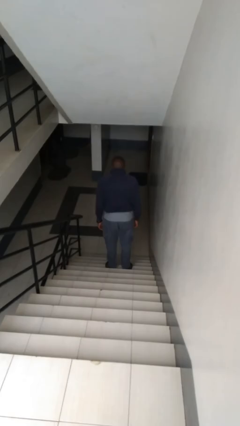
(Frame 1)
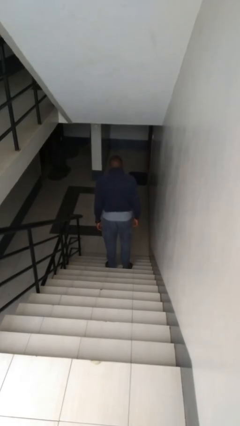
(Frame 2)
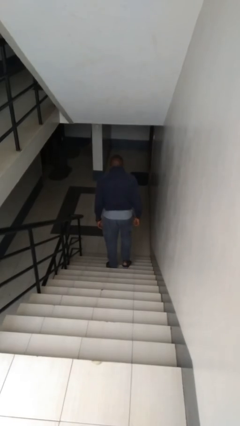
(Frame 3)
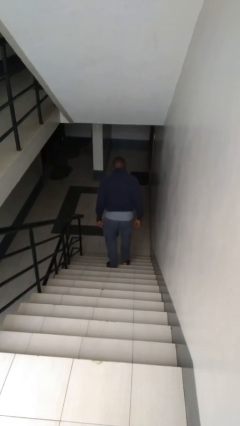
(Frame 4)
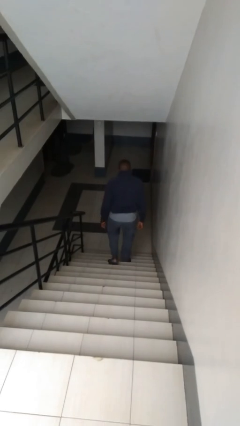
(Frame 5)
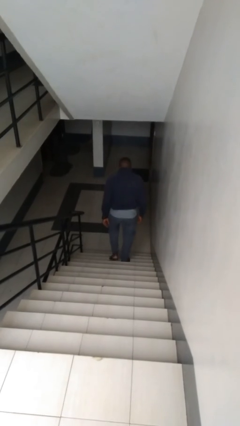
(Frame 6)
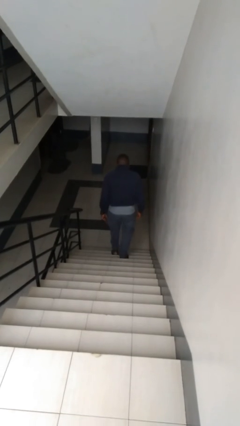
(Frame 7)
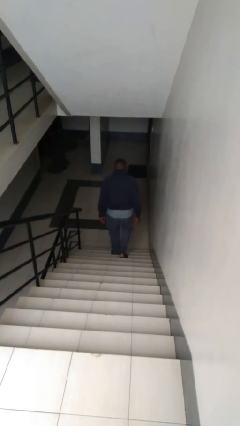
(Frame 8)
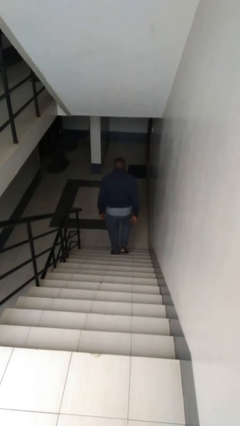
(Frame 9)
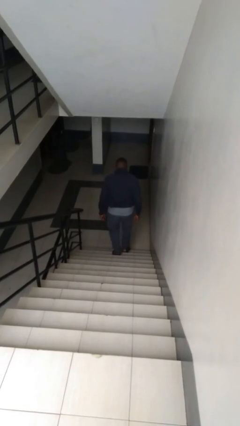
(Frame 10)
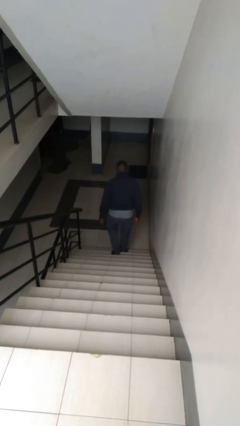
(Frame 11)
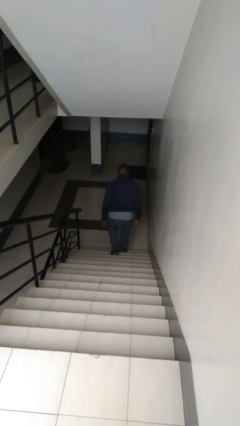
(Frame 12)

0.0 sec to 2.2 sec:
person climbs down stairs

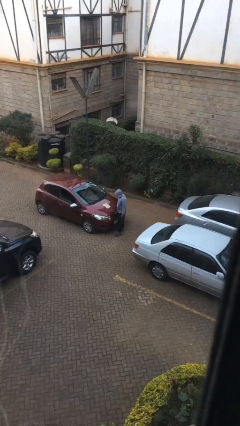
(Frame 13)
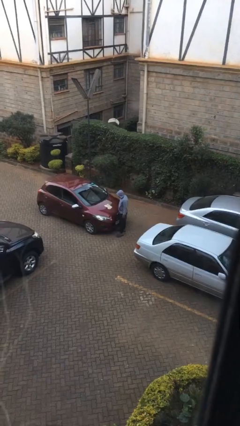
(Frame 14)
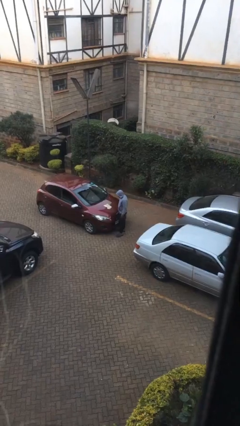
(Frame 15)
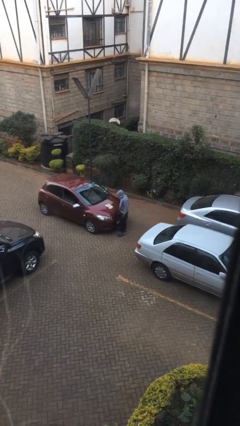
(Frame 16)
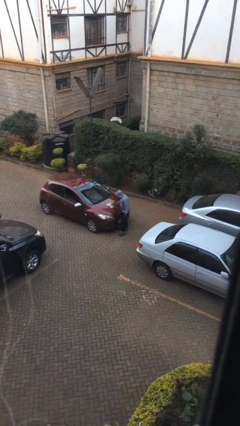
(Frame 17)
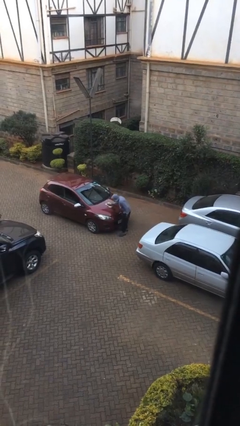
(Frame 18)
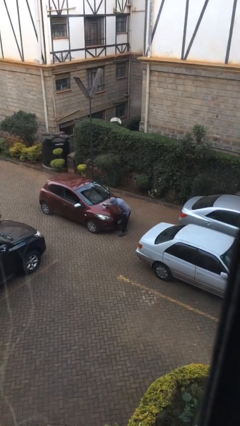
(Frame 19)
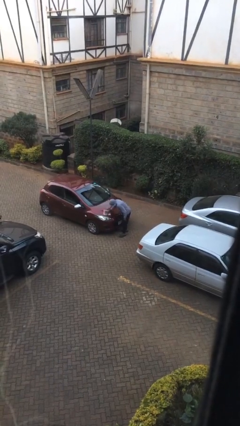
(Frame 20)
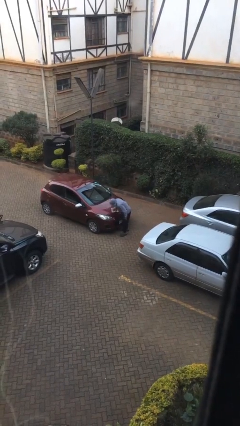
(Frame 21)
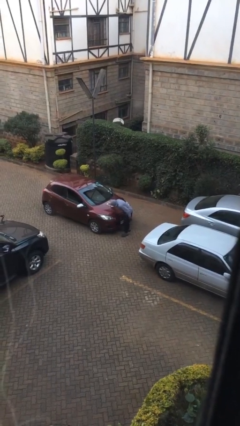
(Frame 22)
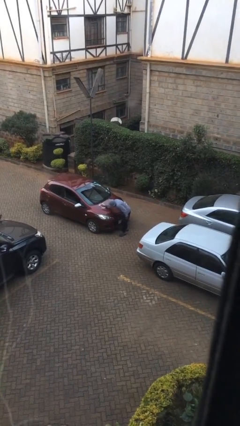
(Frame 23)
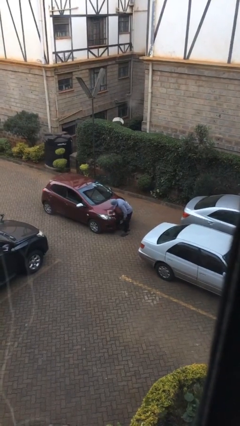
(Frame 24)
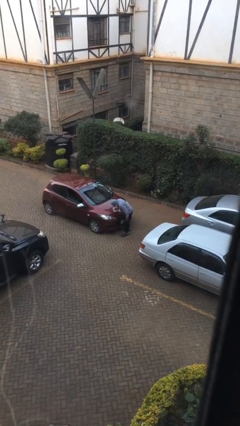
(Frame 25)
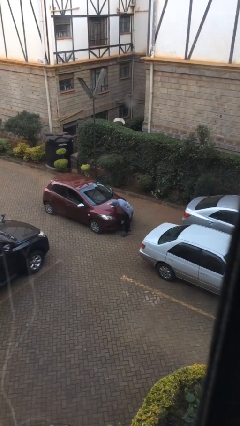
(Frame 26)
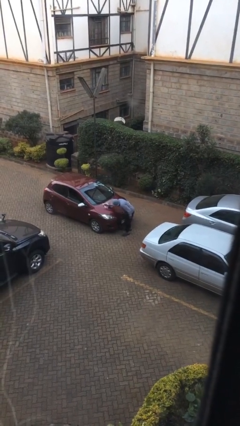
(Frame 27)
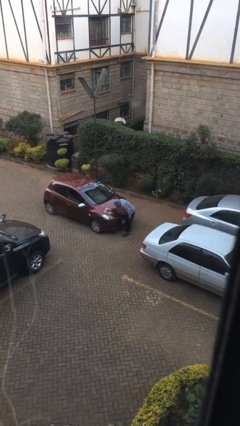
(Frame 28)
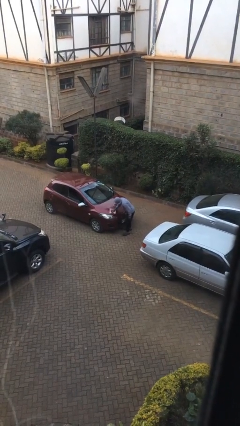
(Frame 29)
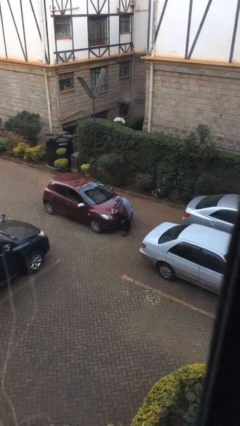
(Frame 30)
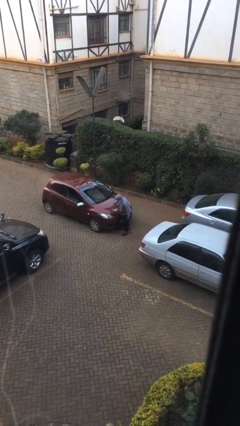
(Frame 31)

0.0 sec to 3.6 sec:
person polishes car with rag

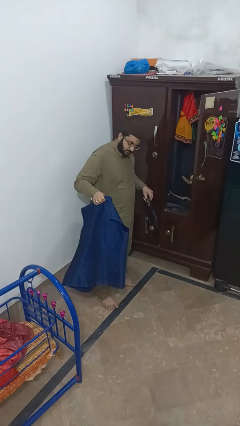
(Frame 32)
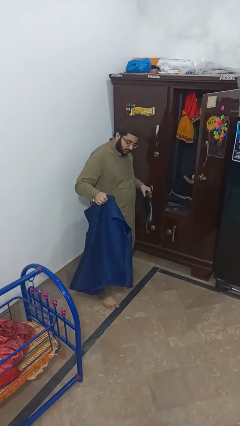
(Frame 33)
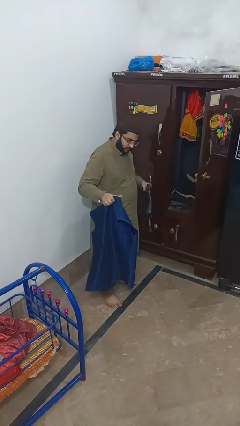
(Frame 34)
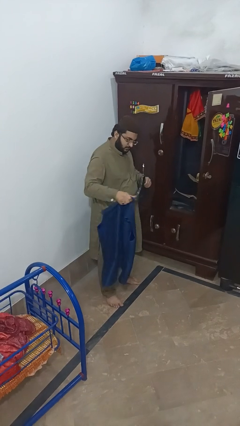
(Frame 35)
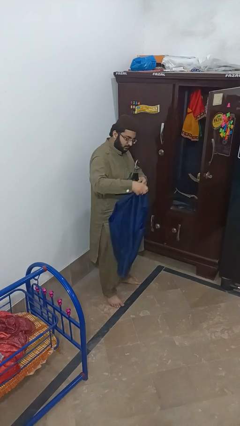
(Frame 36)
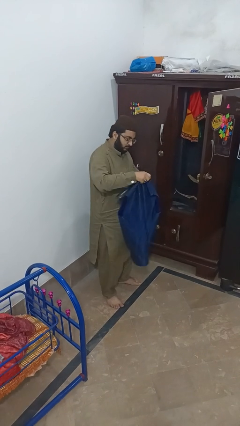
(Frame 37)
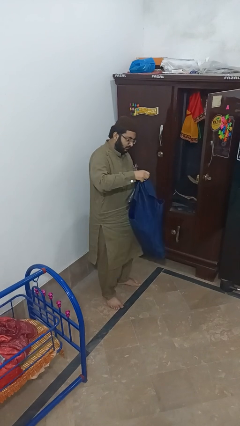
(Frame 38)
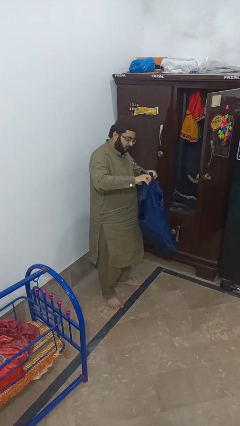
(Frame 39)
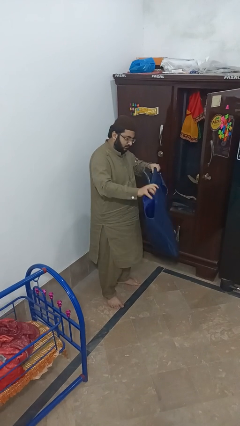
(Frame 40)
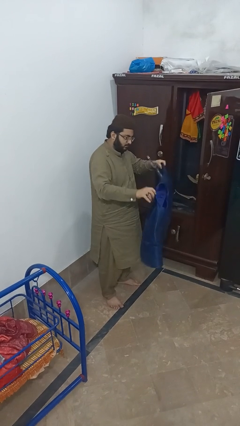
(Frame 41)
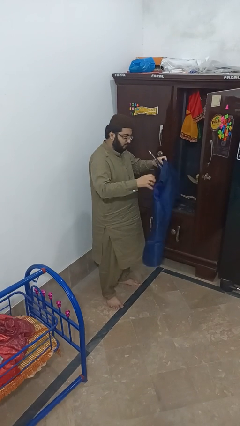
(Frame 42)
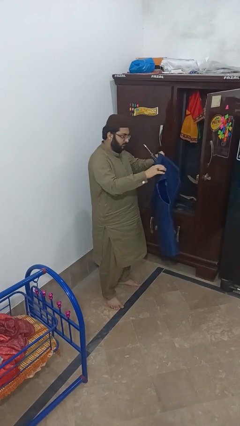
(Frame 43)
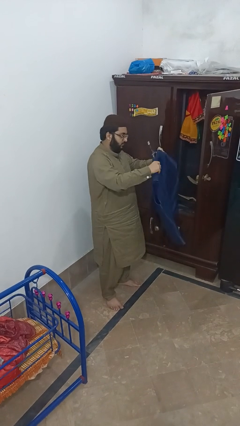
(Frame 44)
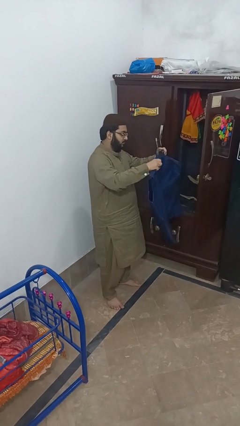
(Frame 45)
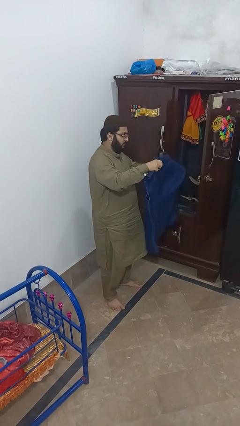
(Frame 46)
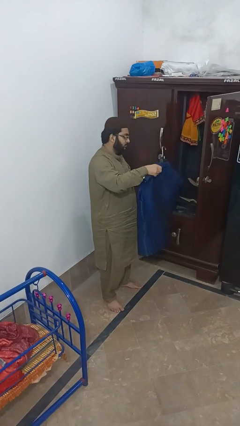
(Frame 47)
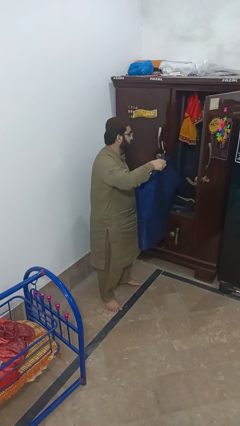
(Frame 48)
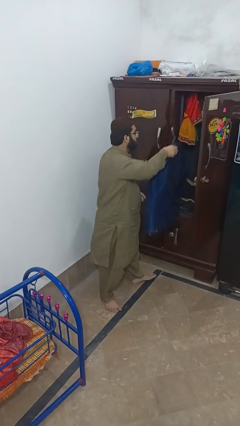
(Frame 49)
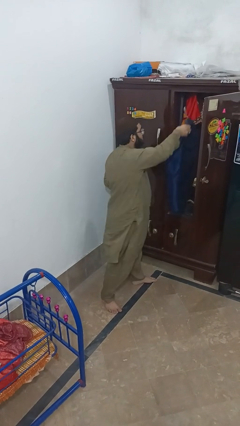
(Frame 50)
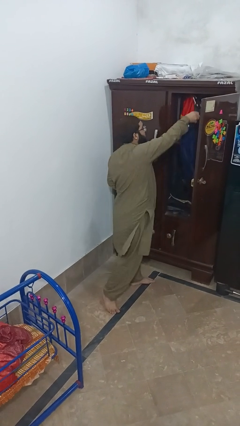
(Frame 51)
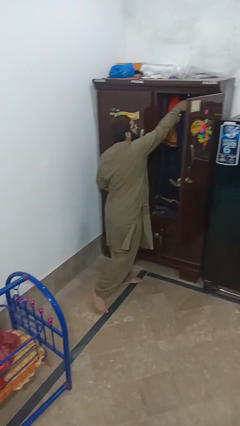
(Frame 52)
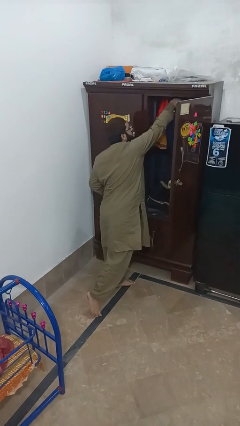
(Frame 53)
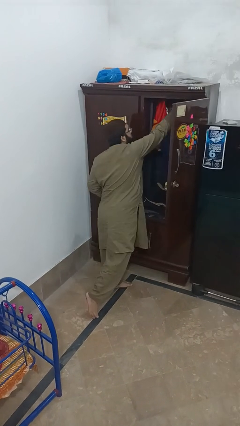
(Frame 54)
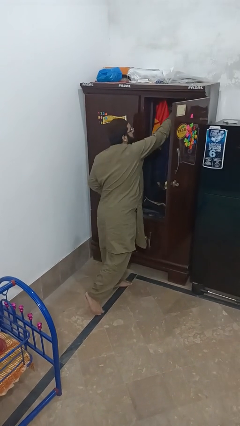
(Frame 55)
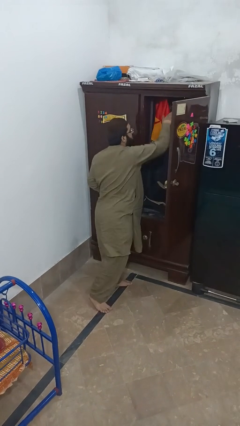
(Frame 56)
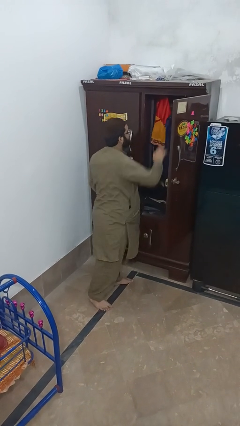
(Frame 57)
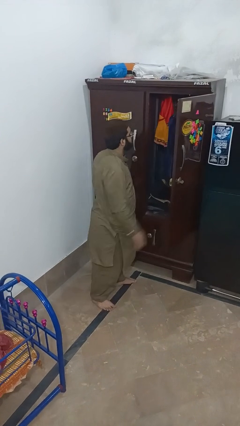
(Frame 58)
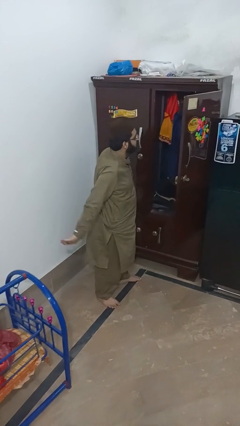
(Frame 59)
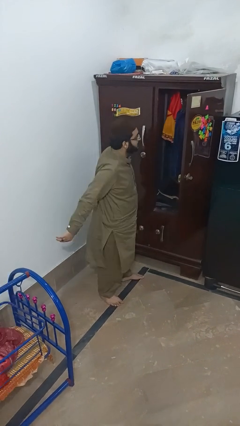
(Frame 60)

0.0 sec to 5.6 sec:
person puts clothes into closet

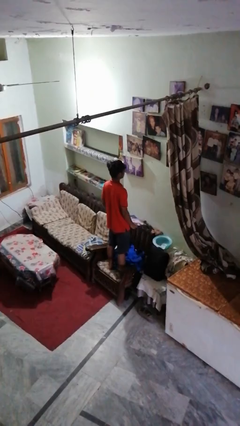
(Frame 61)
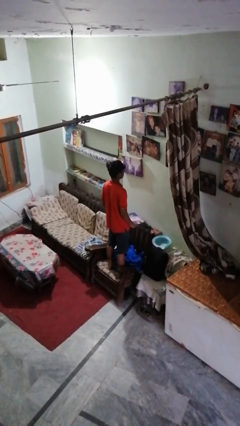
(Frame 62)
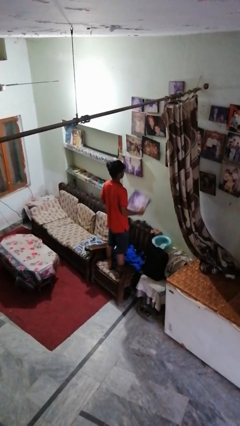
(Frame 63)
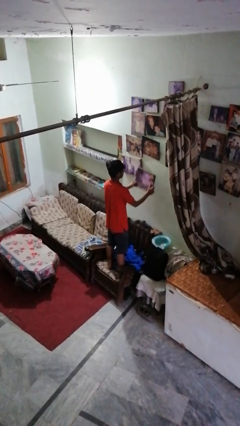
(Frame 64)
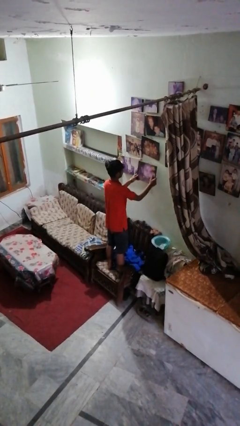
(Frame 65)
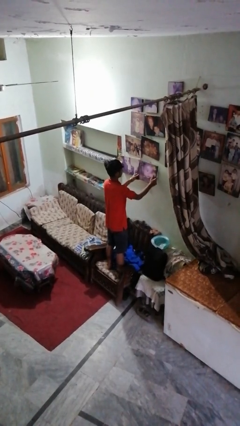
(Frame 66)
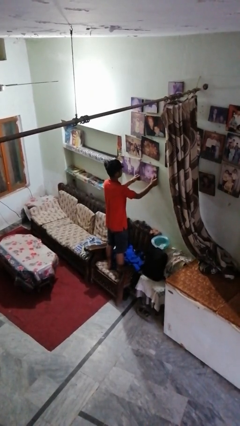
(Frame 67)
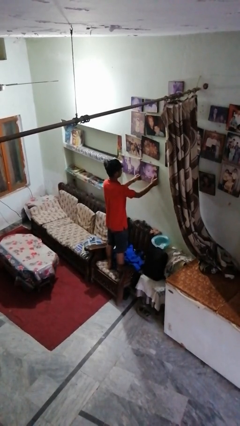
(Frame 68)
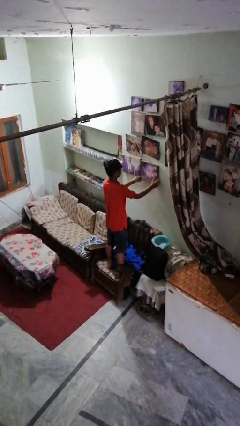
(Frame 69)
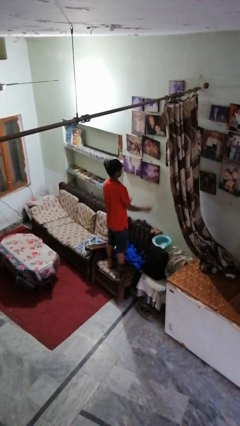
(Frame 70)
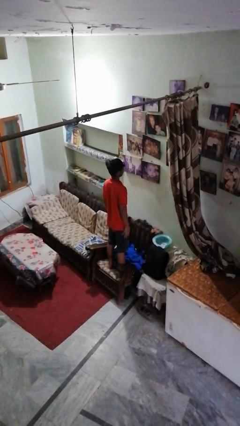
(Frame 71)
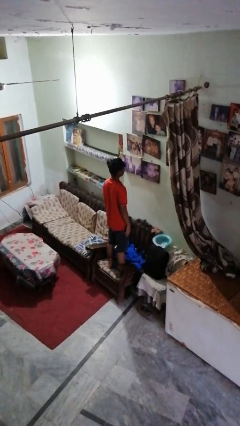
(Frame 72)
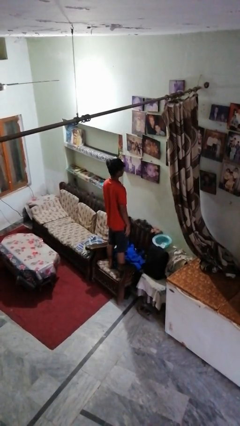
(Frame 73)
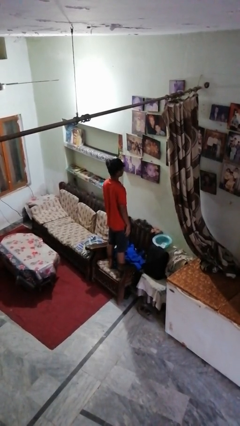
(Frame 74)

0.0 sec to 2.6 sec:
person puts up picture frame

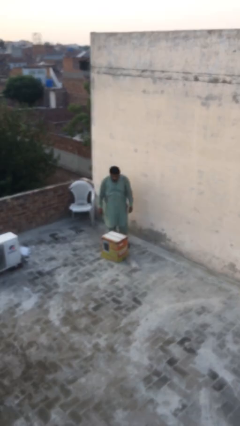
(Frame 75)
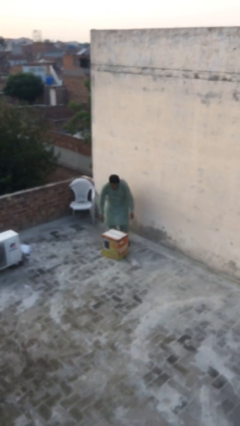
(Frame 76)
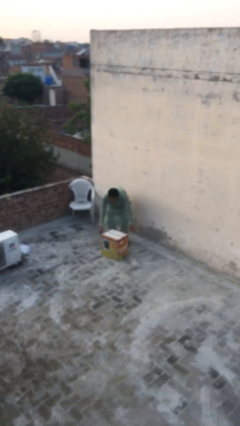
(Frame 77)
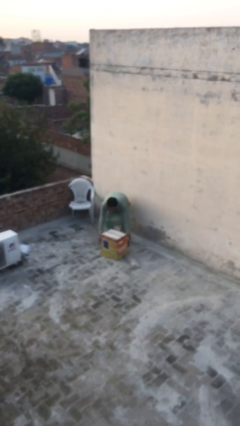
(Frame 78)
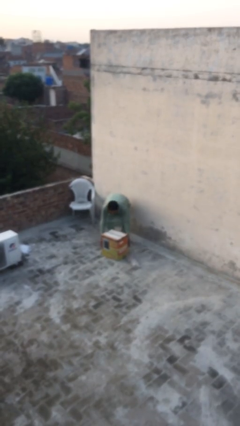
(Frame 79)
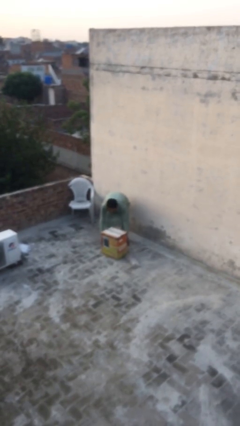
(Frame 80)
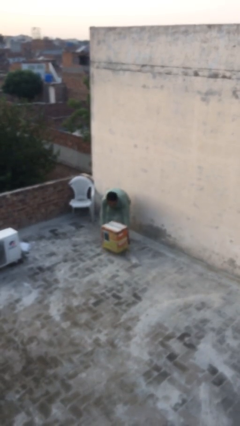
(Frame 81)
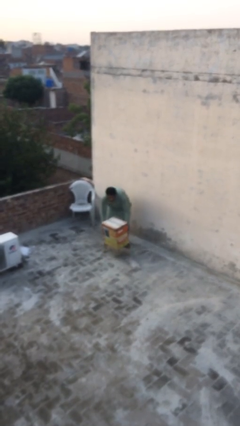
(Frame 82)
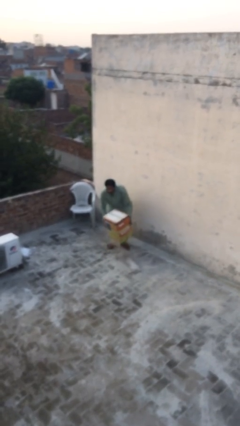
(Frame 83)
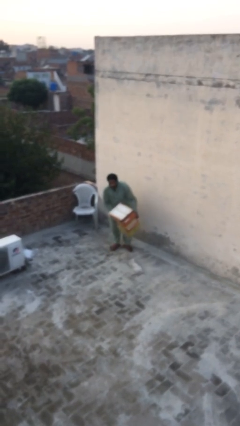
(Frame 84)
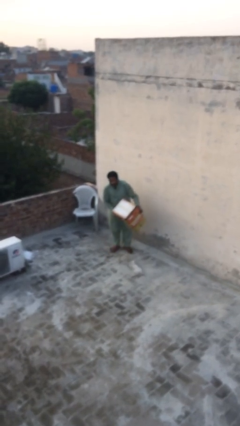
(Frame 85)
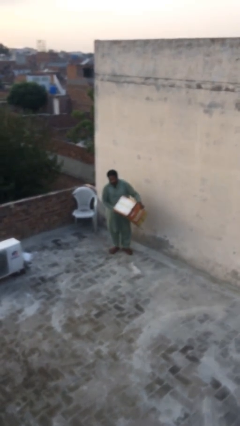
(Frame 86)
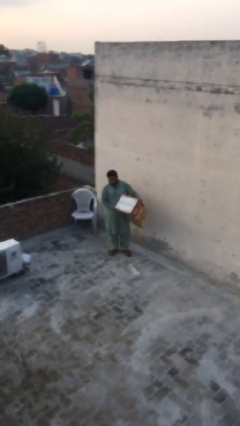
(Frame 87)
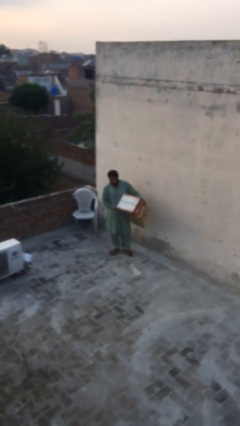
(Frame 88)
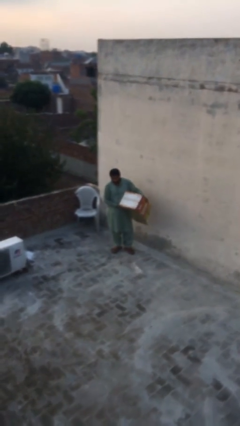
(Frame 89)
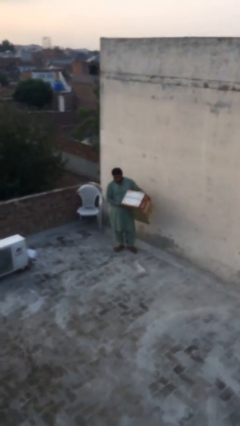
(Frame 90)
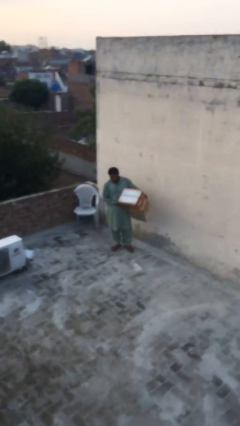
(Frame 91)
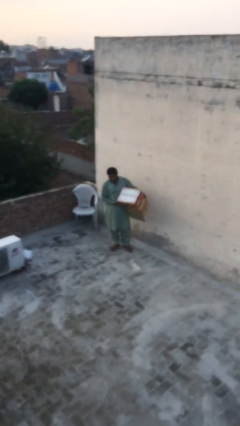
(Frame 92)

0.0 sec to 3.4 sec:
person picks up object from floor

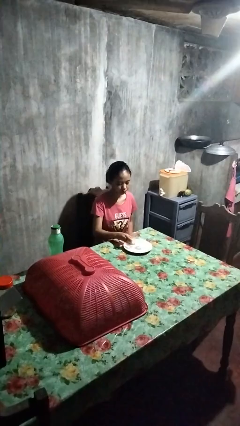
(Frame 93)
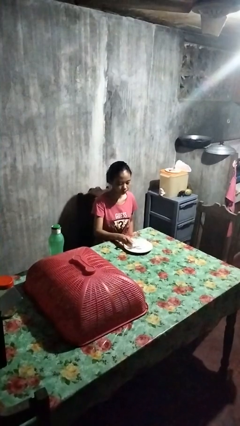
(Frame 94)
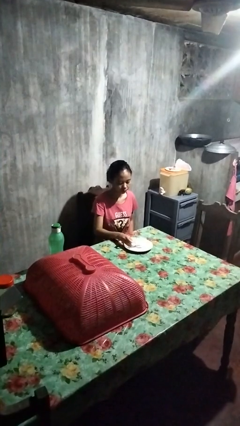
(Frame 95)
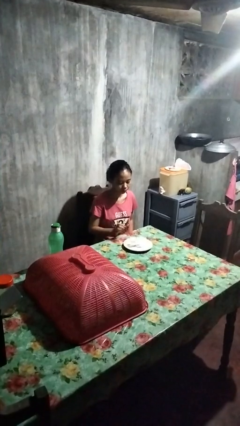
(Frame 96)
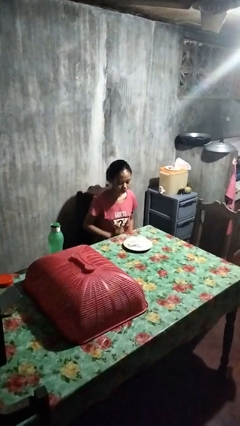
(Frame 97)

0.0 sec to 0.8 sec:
person puts down object on table
